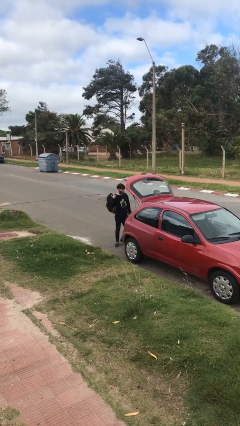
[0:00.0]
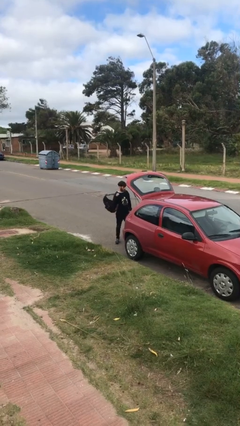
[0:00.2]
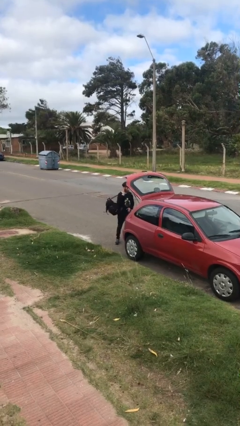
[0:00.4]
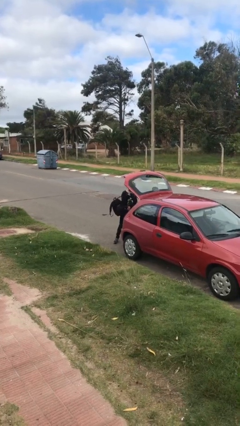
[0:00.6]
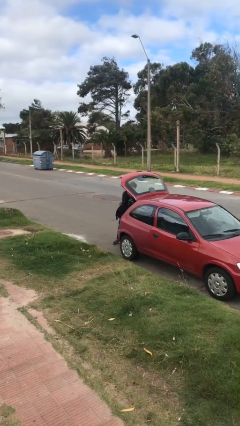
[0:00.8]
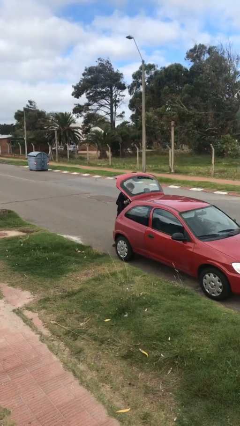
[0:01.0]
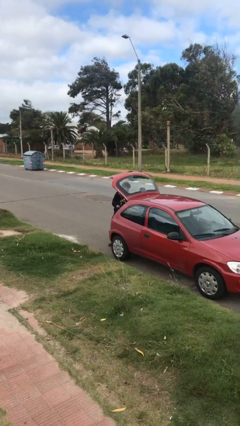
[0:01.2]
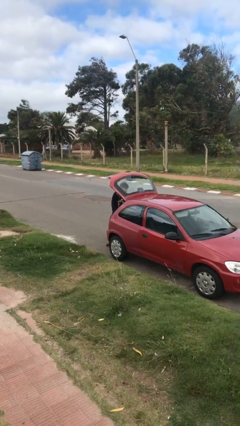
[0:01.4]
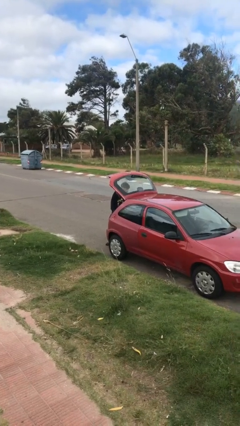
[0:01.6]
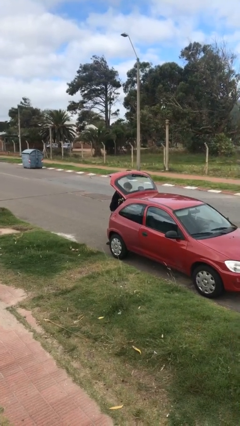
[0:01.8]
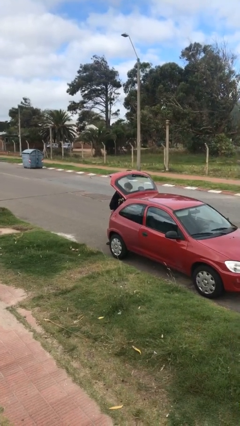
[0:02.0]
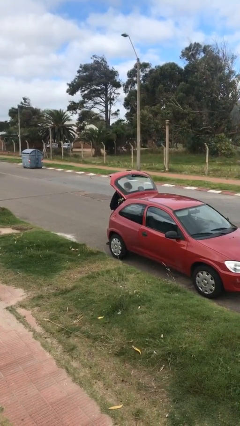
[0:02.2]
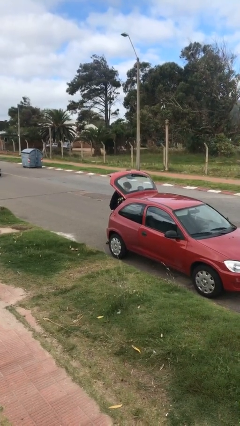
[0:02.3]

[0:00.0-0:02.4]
person loads car

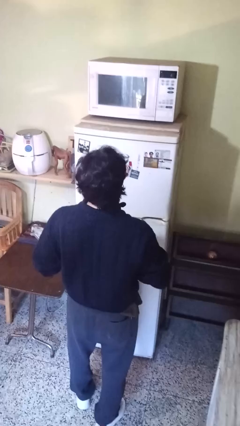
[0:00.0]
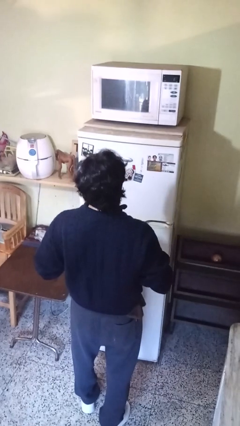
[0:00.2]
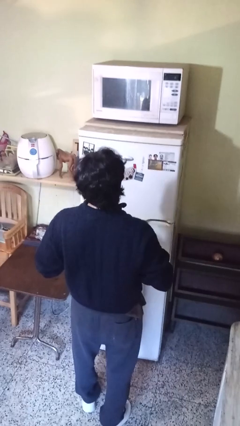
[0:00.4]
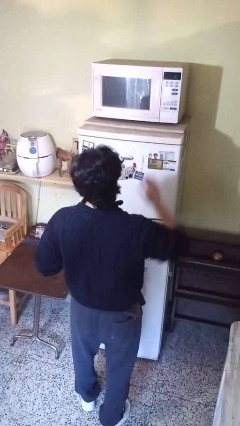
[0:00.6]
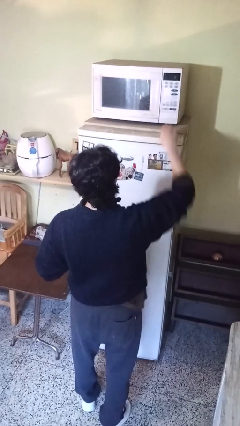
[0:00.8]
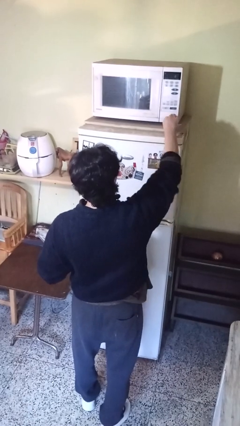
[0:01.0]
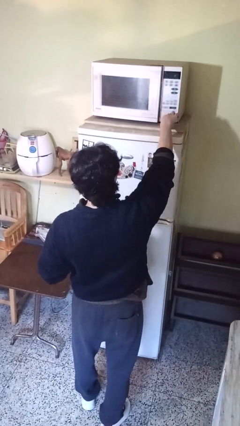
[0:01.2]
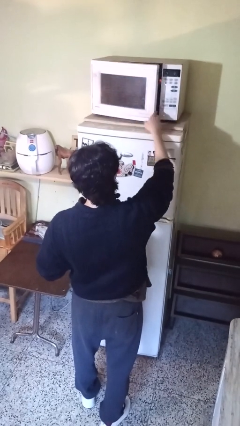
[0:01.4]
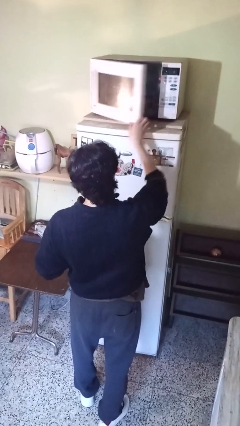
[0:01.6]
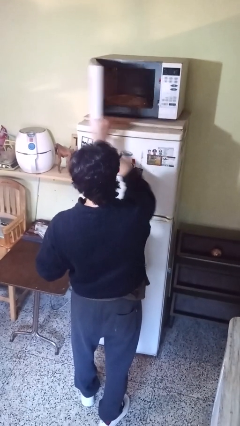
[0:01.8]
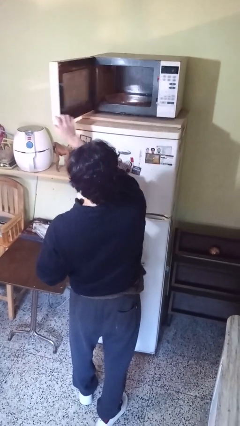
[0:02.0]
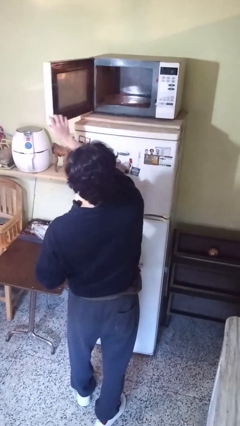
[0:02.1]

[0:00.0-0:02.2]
person opens microwave

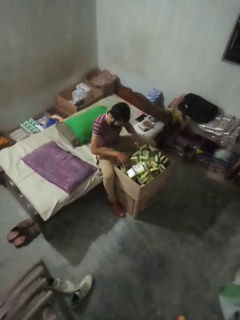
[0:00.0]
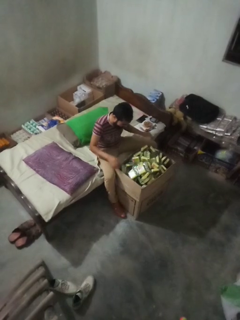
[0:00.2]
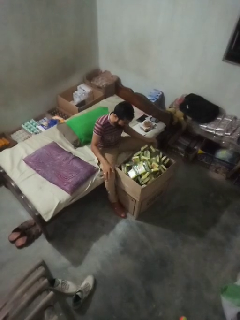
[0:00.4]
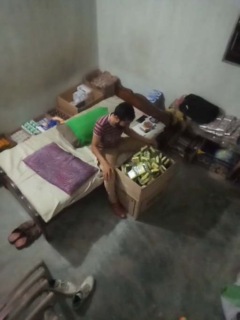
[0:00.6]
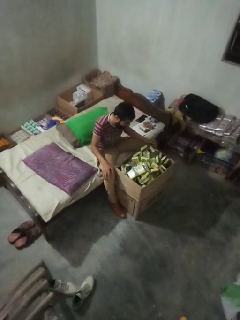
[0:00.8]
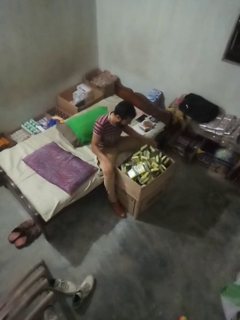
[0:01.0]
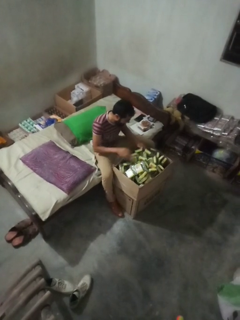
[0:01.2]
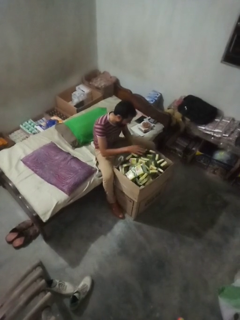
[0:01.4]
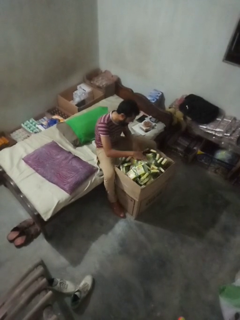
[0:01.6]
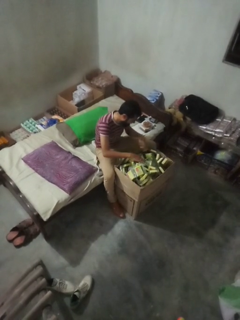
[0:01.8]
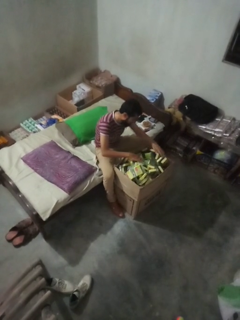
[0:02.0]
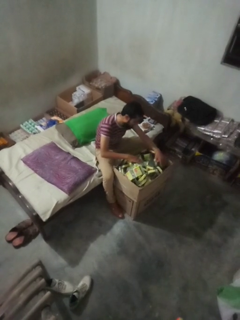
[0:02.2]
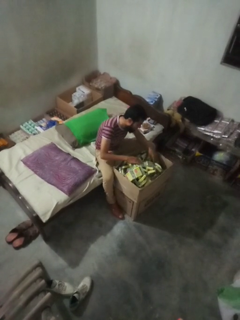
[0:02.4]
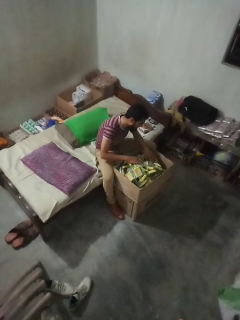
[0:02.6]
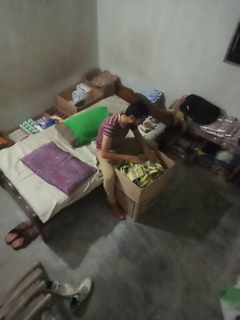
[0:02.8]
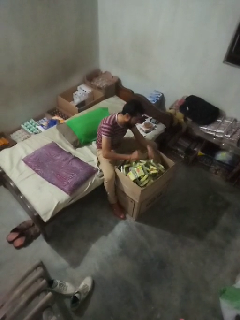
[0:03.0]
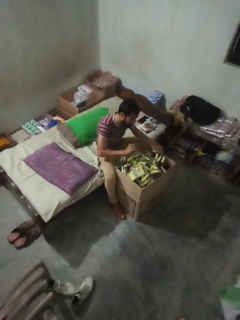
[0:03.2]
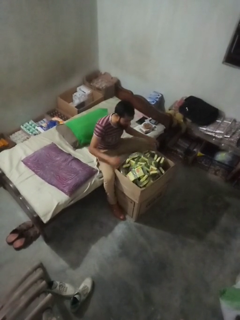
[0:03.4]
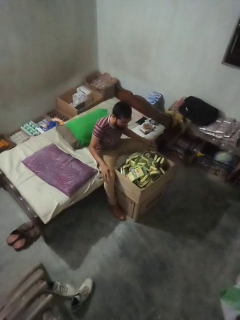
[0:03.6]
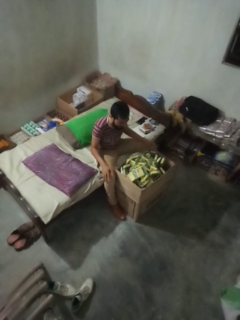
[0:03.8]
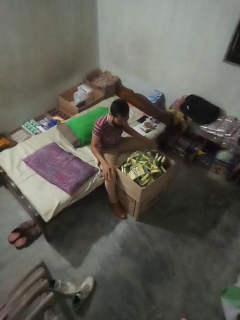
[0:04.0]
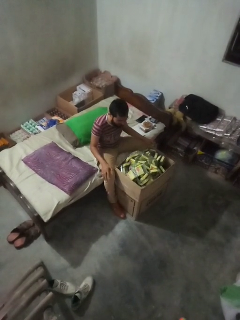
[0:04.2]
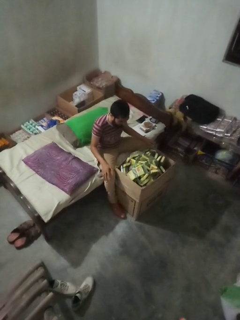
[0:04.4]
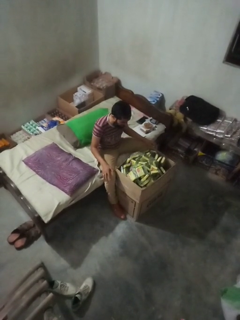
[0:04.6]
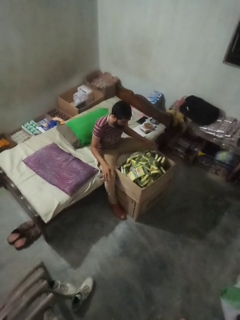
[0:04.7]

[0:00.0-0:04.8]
person searches in box

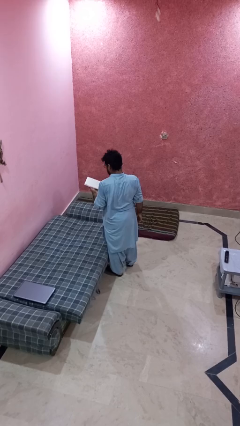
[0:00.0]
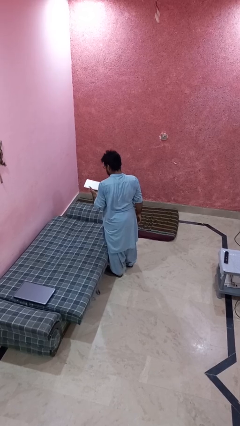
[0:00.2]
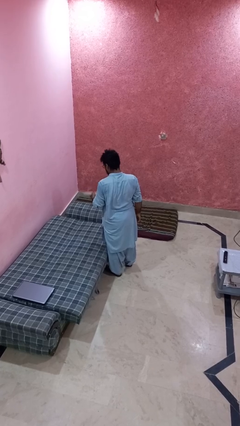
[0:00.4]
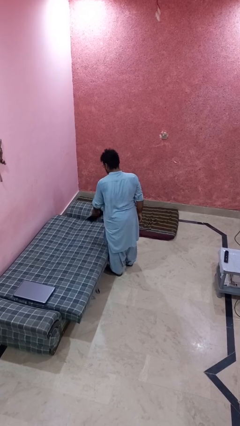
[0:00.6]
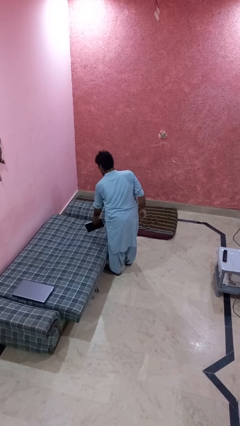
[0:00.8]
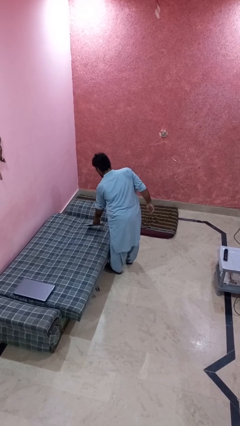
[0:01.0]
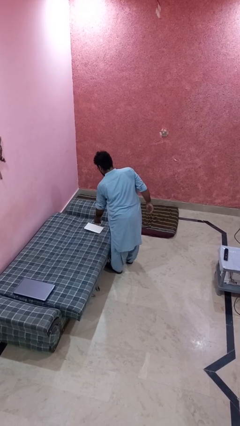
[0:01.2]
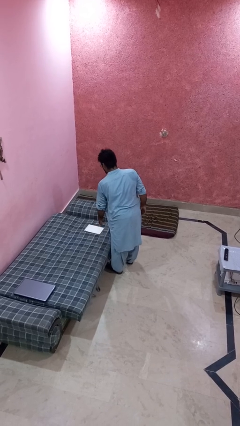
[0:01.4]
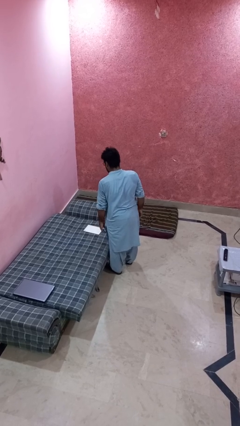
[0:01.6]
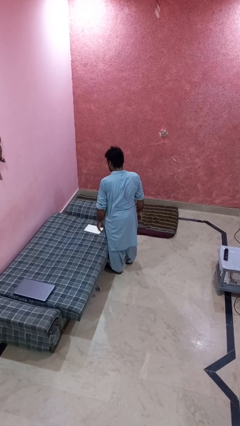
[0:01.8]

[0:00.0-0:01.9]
person puts down object on bed

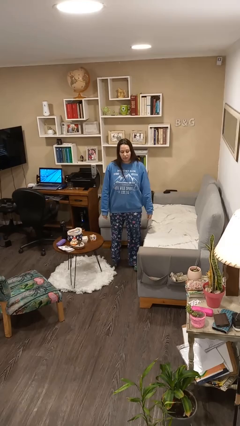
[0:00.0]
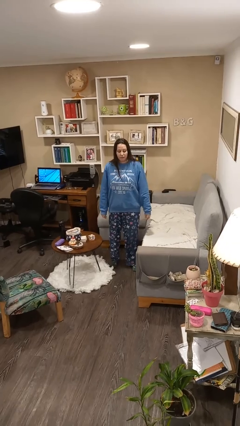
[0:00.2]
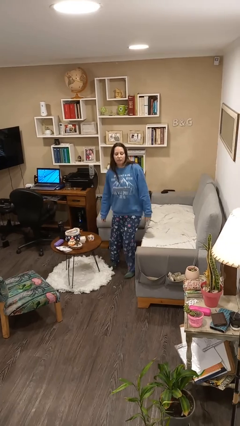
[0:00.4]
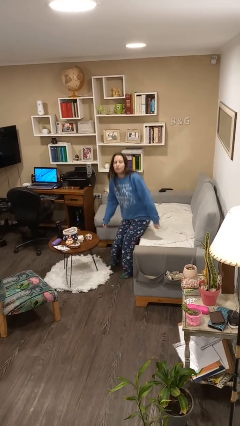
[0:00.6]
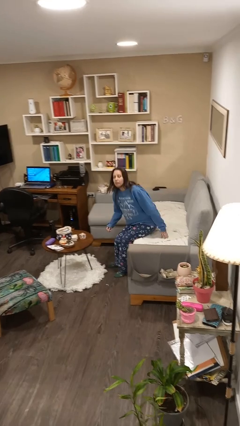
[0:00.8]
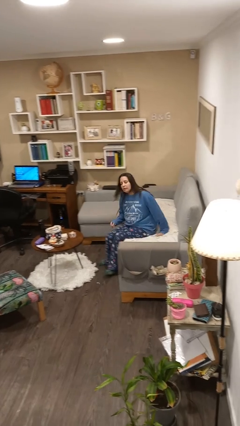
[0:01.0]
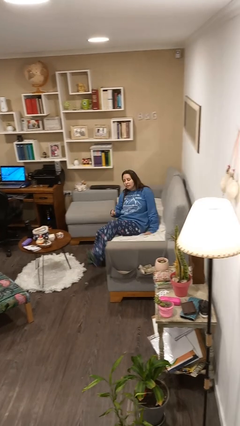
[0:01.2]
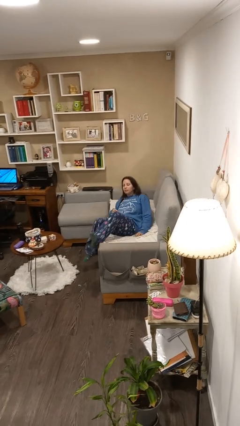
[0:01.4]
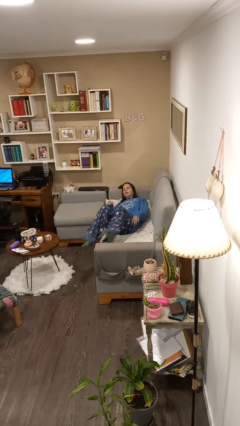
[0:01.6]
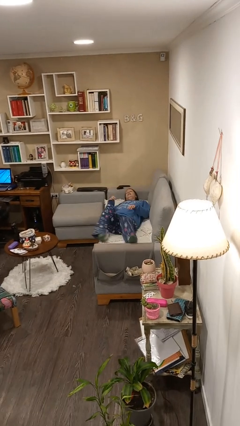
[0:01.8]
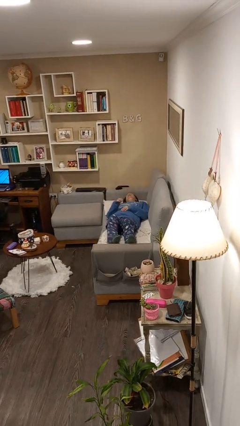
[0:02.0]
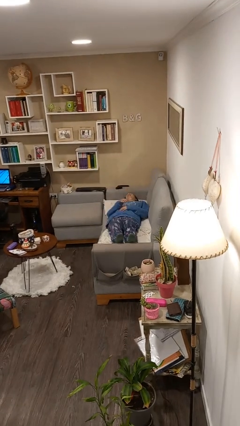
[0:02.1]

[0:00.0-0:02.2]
person lies down on couch

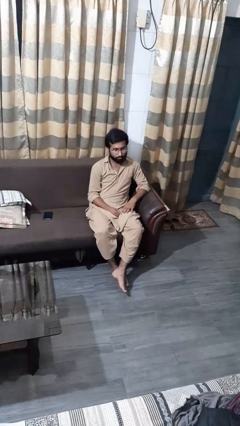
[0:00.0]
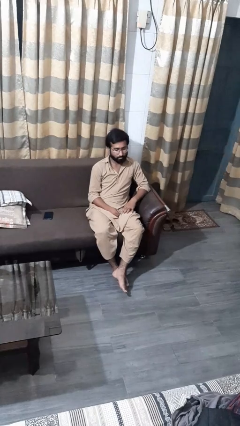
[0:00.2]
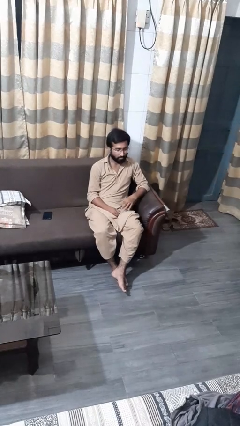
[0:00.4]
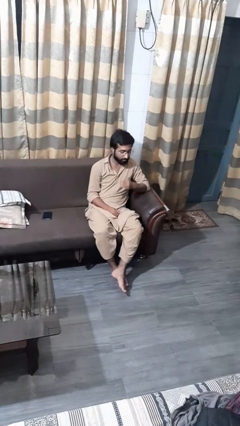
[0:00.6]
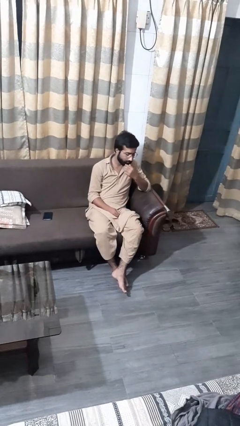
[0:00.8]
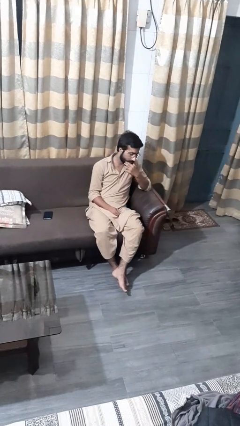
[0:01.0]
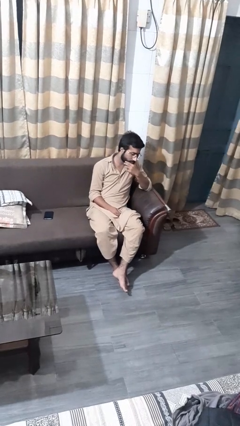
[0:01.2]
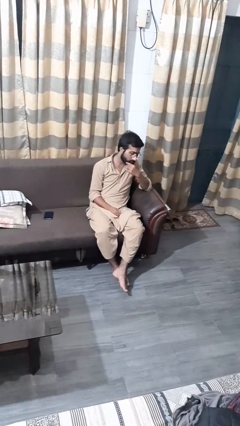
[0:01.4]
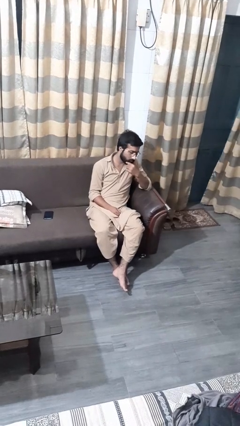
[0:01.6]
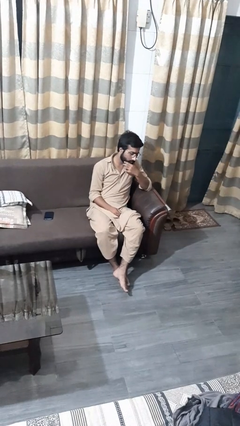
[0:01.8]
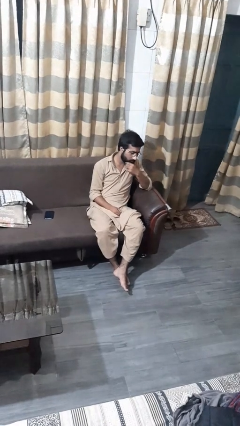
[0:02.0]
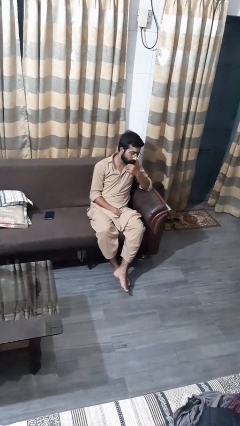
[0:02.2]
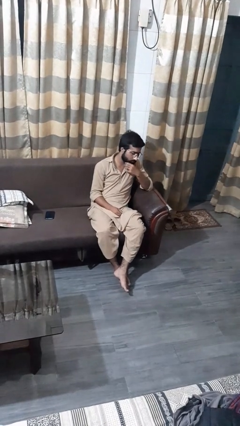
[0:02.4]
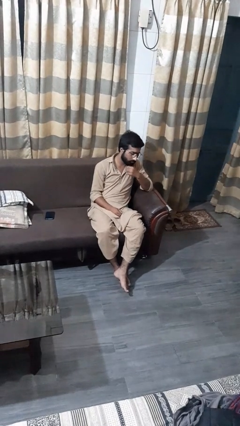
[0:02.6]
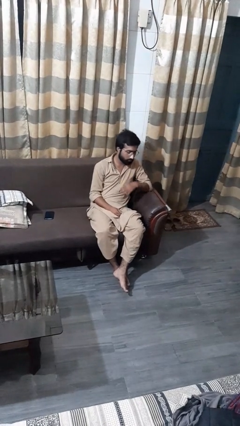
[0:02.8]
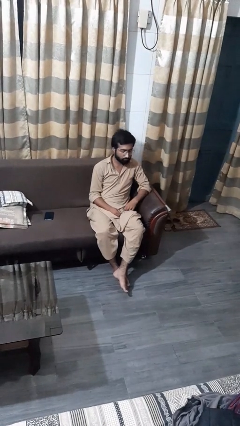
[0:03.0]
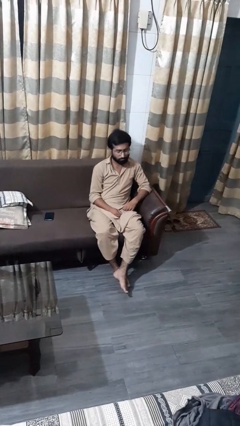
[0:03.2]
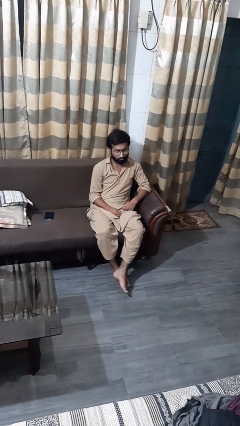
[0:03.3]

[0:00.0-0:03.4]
person strokes chin

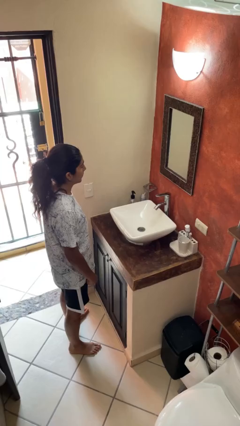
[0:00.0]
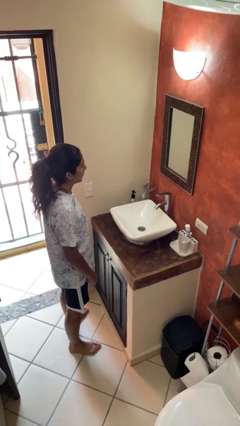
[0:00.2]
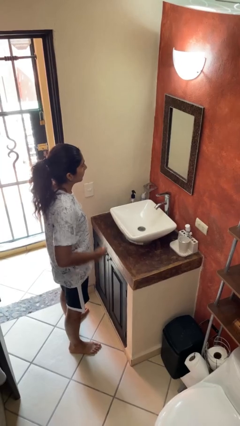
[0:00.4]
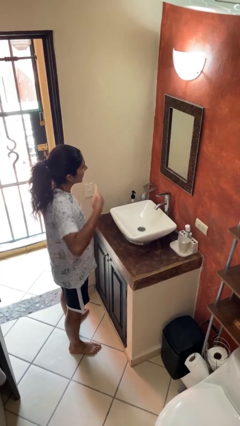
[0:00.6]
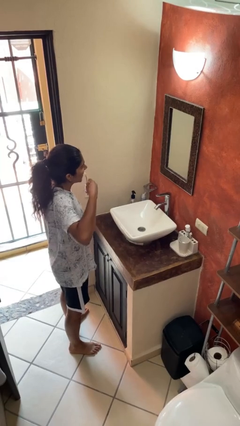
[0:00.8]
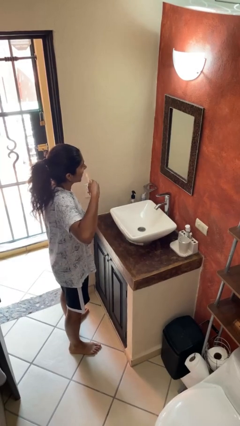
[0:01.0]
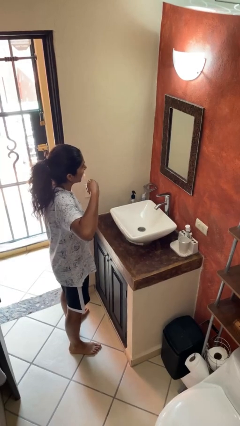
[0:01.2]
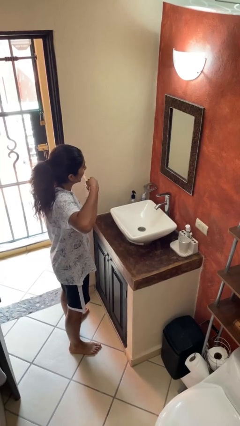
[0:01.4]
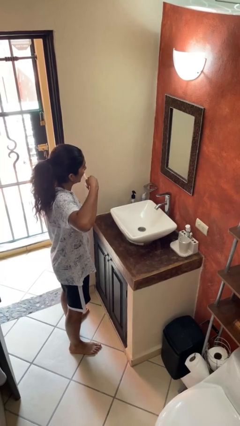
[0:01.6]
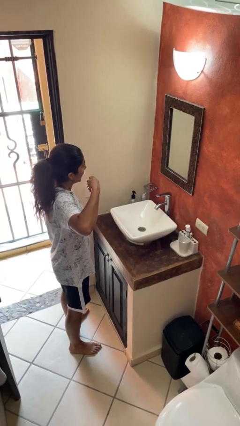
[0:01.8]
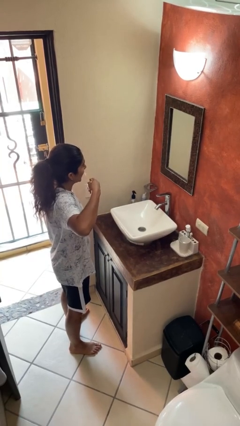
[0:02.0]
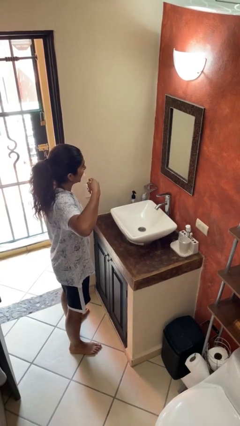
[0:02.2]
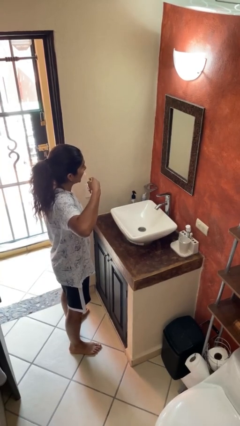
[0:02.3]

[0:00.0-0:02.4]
person brushes teeth
